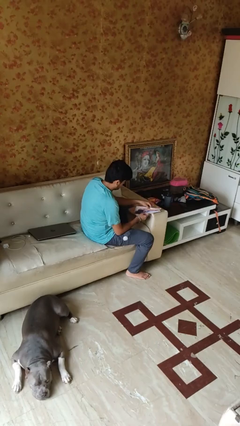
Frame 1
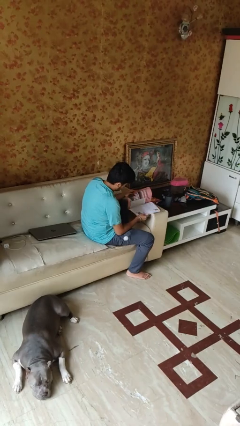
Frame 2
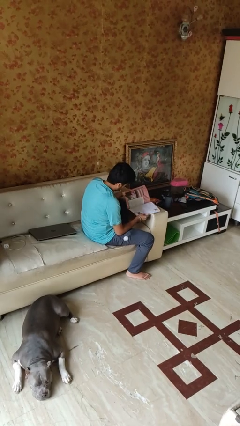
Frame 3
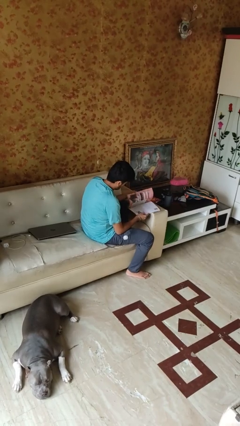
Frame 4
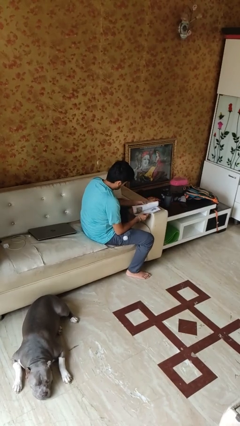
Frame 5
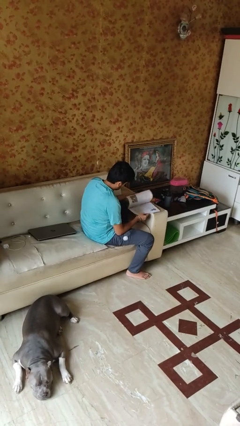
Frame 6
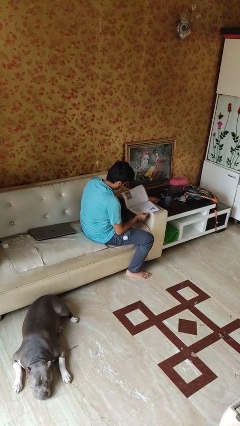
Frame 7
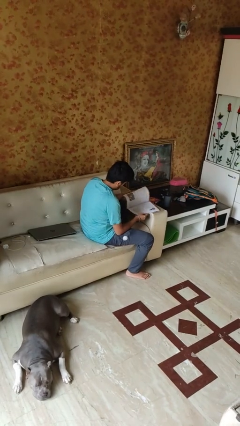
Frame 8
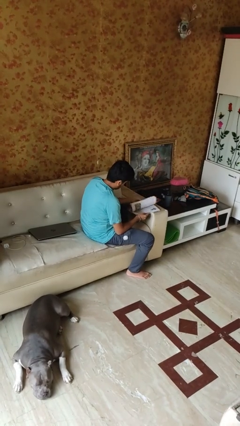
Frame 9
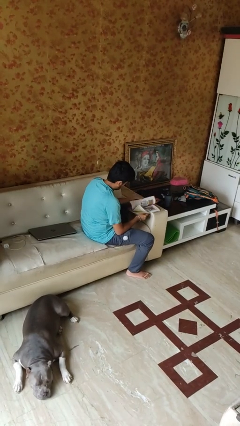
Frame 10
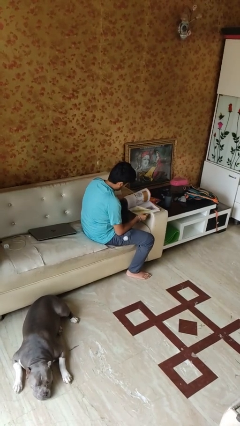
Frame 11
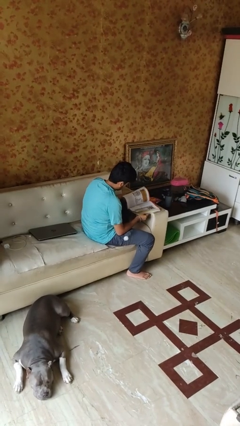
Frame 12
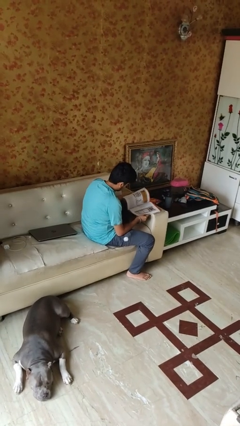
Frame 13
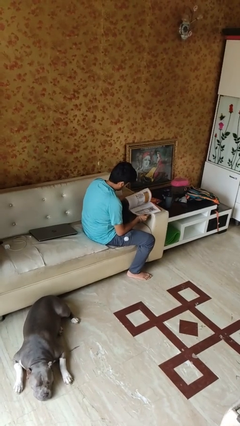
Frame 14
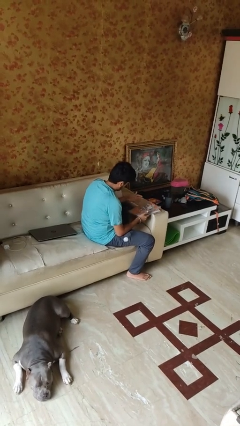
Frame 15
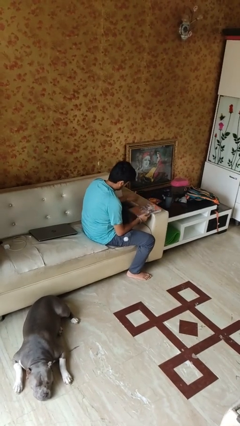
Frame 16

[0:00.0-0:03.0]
person reads magazine

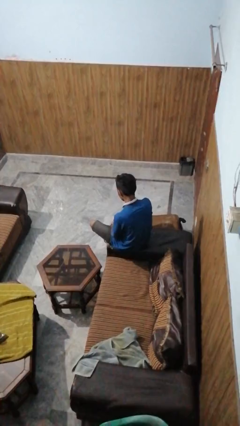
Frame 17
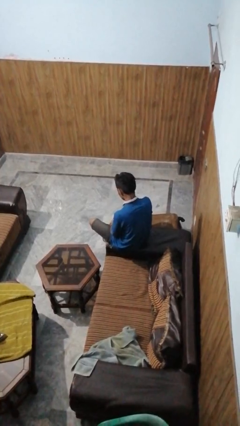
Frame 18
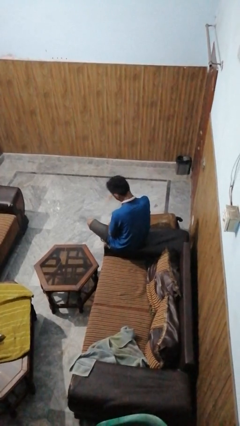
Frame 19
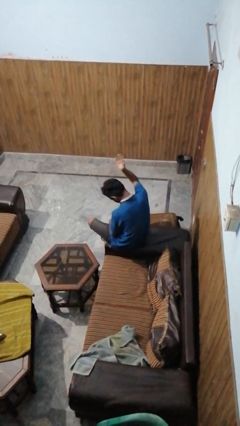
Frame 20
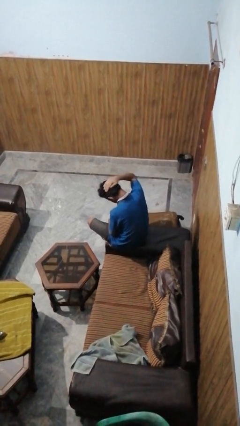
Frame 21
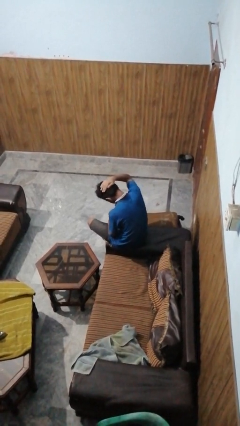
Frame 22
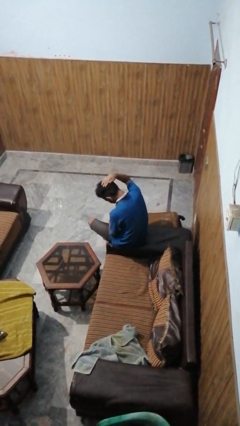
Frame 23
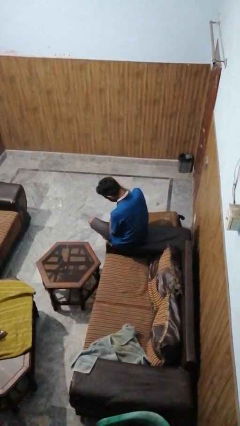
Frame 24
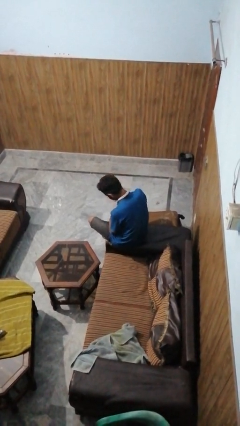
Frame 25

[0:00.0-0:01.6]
person swats bug

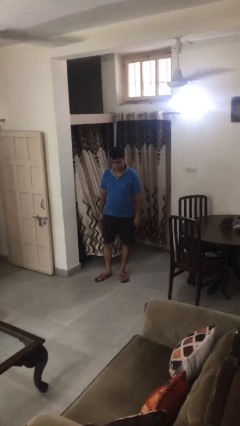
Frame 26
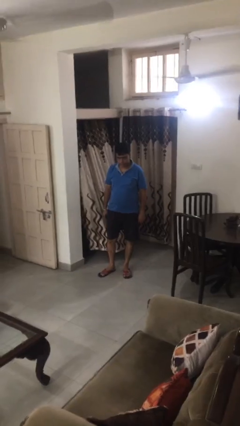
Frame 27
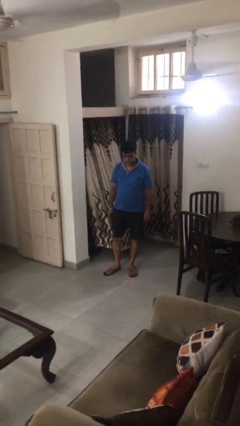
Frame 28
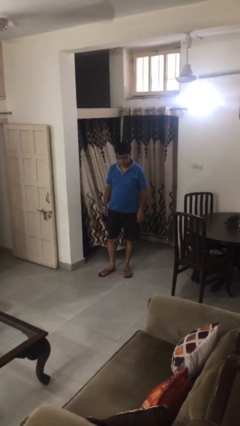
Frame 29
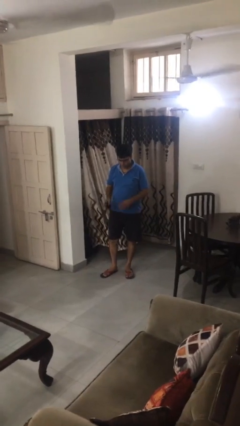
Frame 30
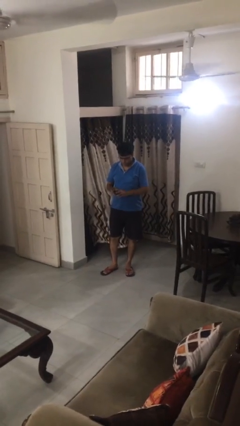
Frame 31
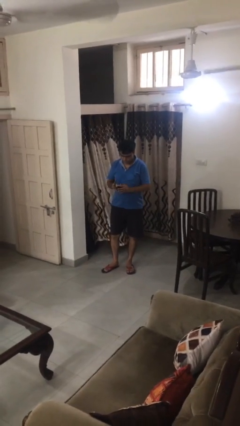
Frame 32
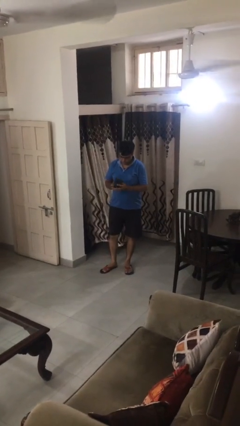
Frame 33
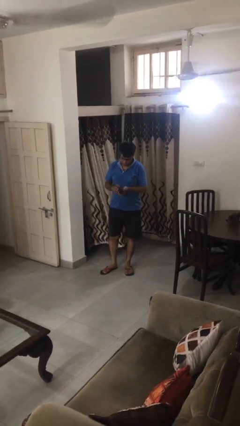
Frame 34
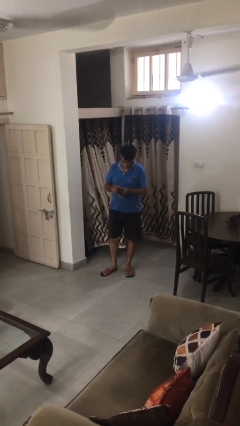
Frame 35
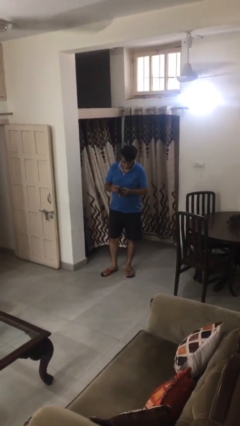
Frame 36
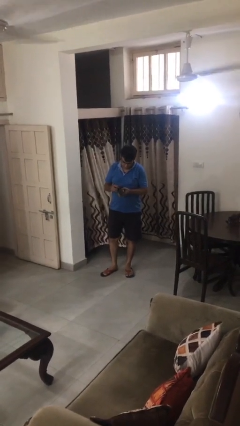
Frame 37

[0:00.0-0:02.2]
person searches in purse

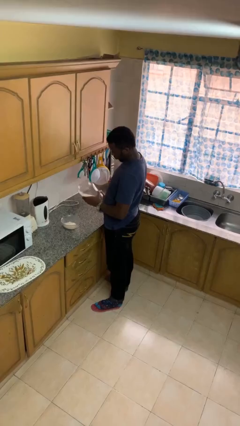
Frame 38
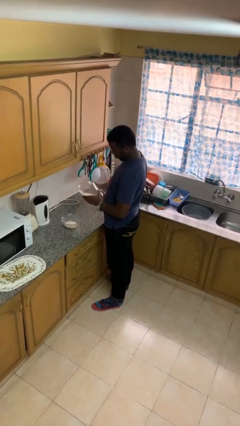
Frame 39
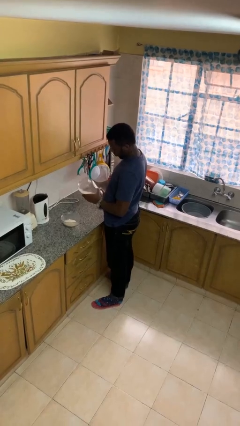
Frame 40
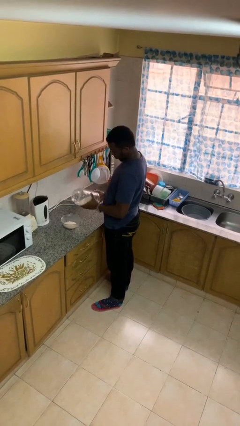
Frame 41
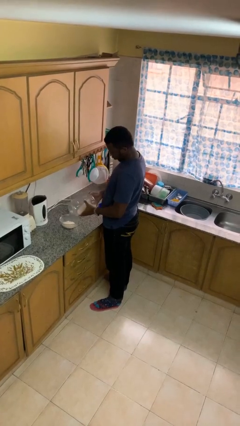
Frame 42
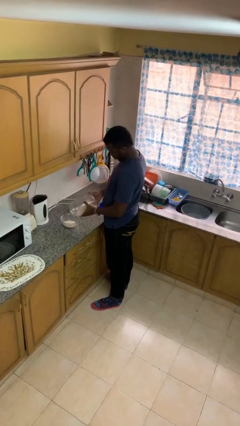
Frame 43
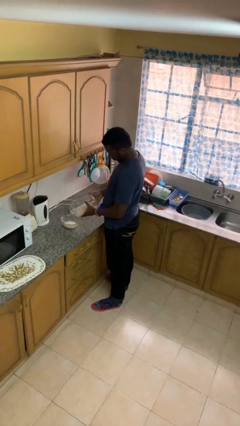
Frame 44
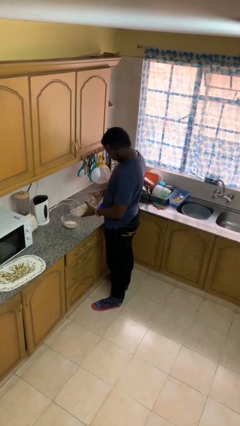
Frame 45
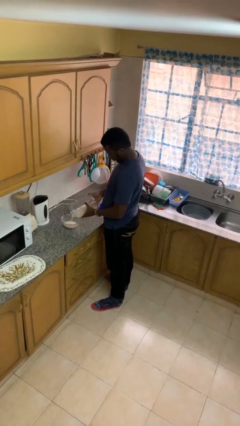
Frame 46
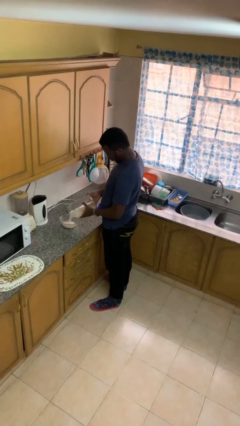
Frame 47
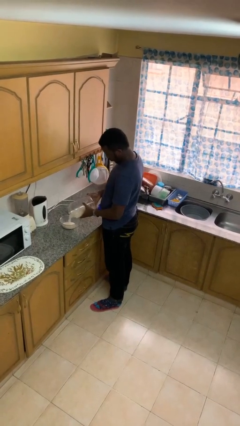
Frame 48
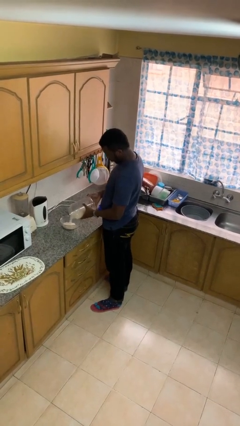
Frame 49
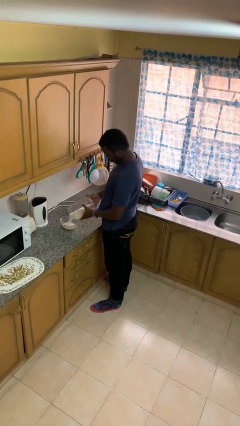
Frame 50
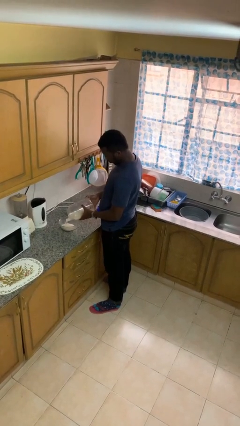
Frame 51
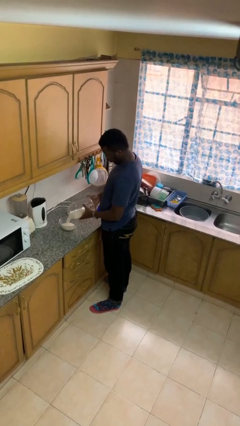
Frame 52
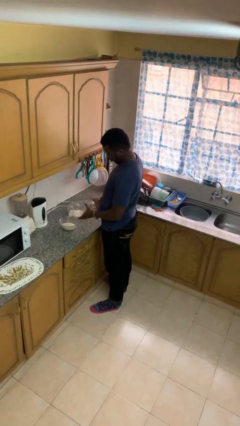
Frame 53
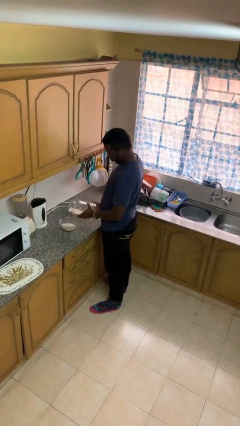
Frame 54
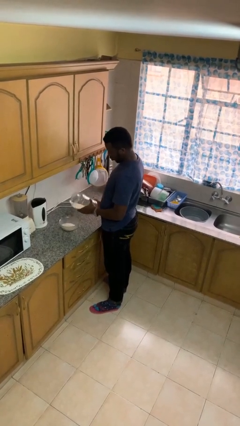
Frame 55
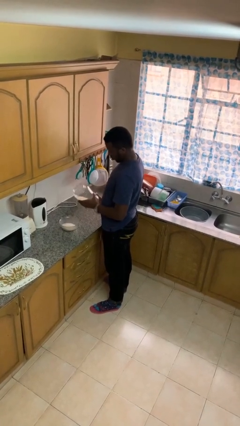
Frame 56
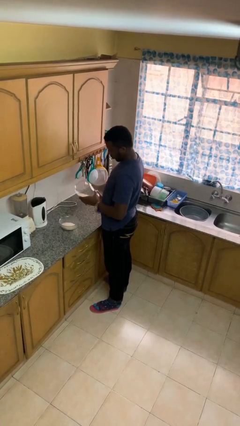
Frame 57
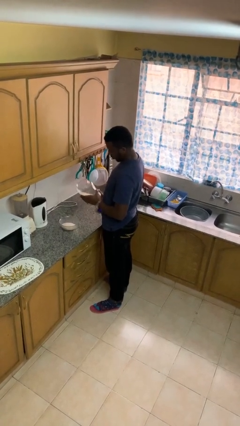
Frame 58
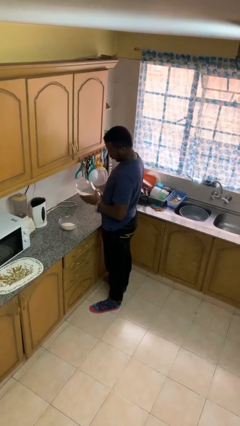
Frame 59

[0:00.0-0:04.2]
person pours into bowl

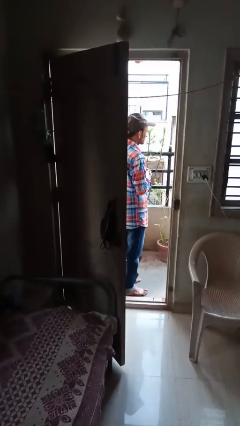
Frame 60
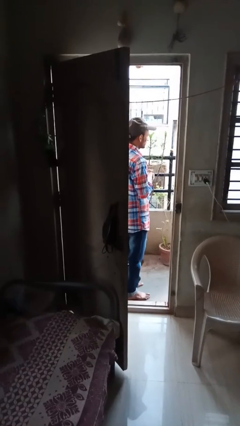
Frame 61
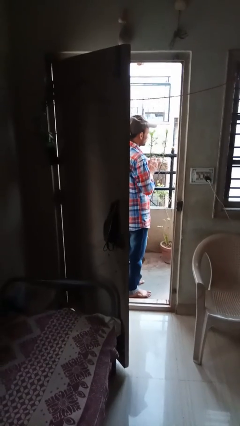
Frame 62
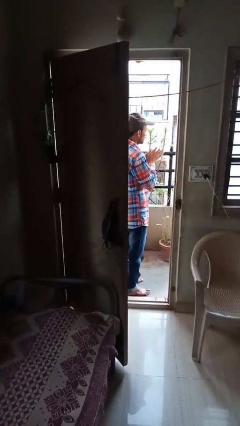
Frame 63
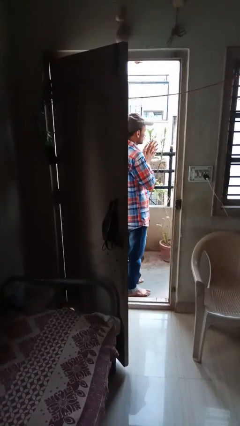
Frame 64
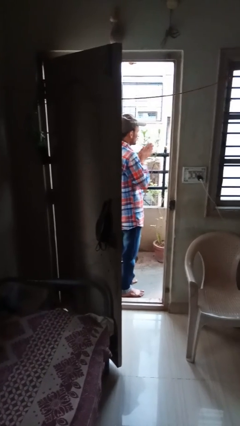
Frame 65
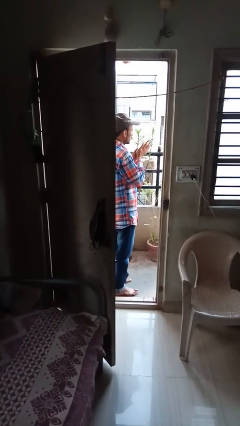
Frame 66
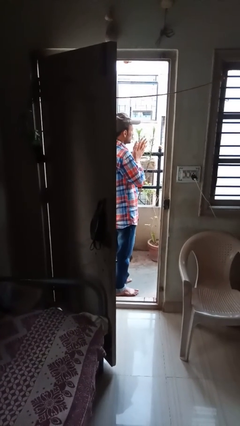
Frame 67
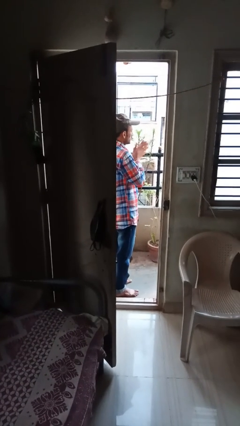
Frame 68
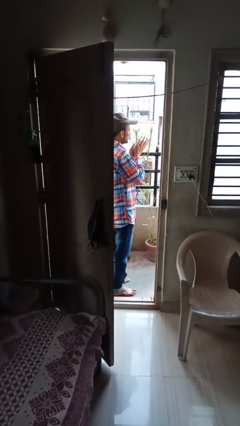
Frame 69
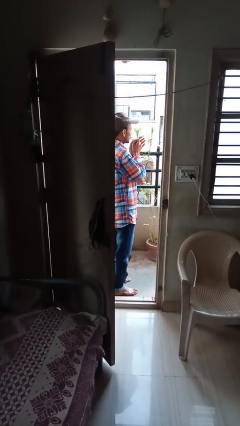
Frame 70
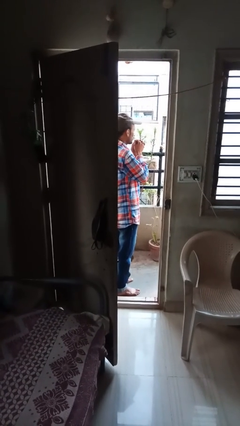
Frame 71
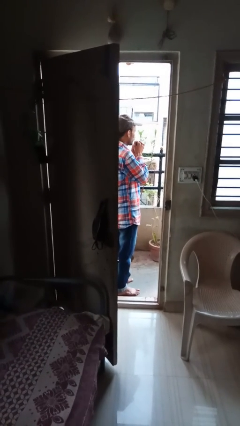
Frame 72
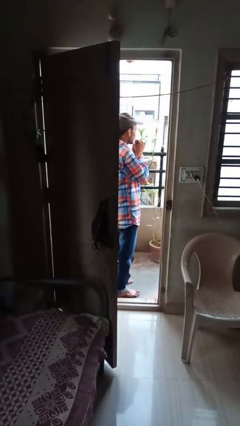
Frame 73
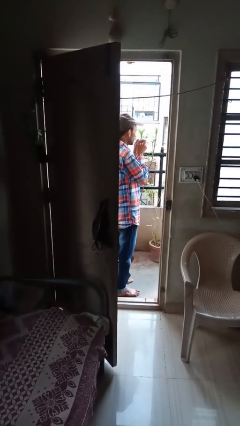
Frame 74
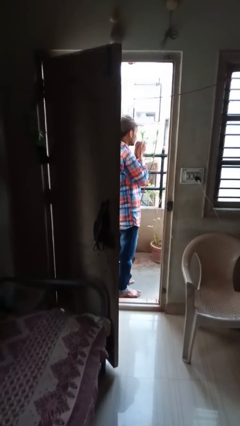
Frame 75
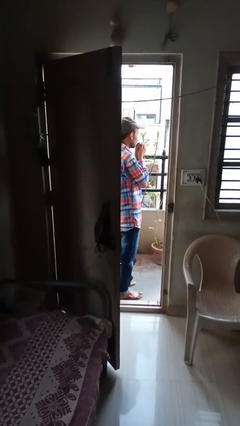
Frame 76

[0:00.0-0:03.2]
person blows into hands

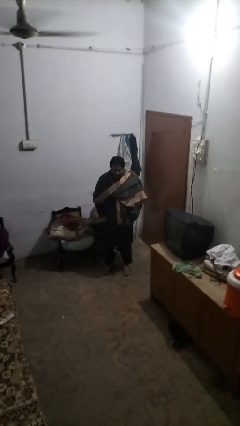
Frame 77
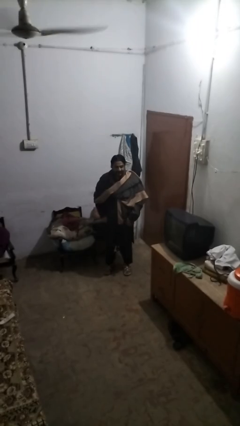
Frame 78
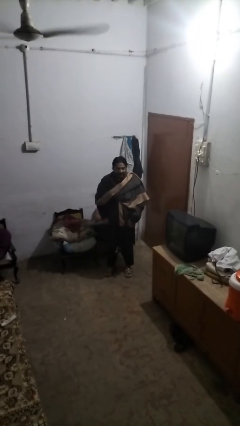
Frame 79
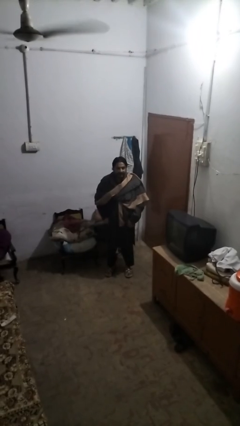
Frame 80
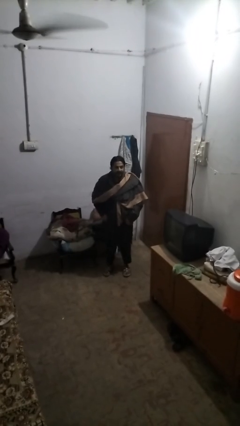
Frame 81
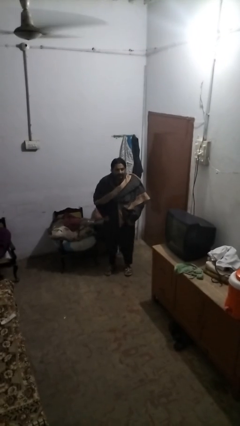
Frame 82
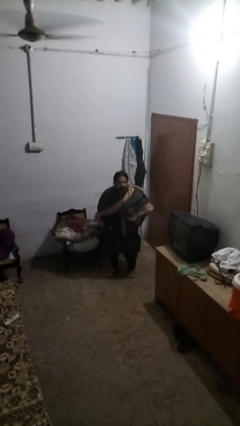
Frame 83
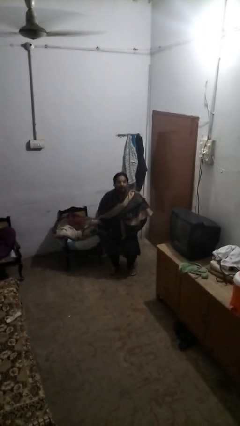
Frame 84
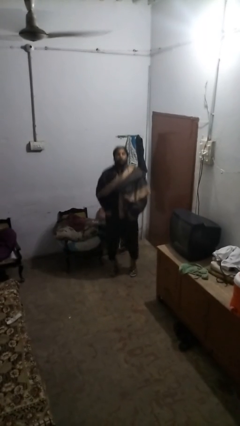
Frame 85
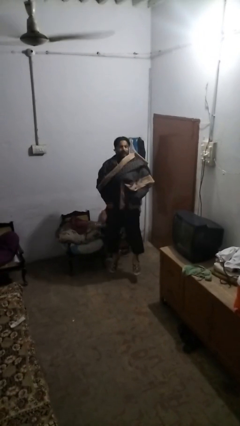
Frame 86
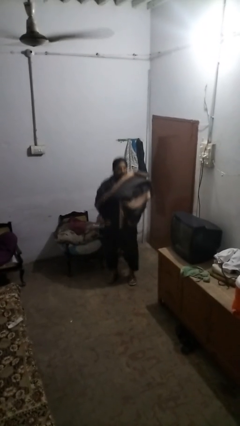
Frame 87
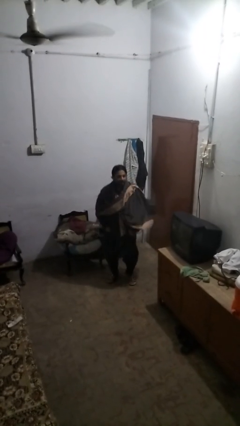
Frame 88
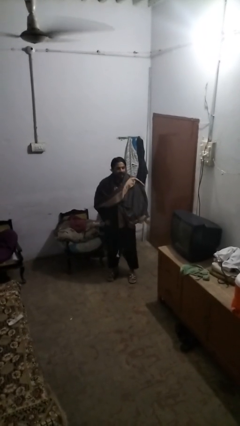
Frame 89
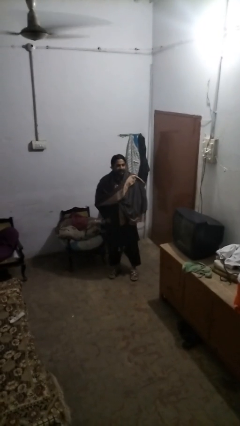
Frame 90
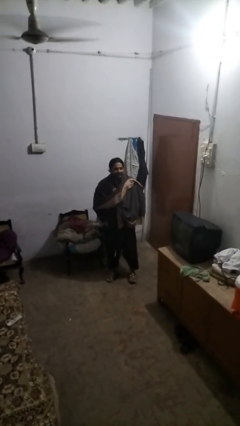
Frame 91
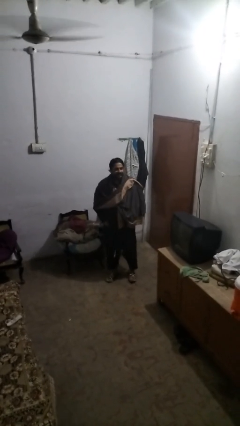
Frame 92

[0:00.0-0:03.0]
person jumps

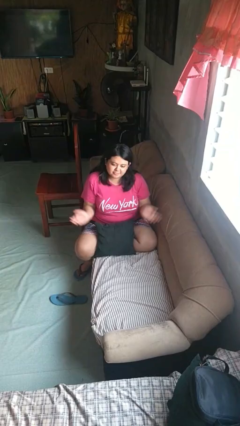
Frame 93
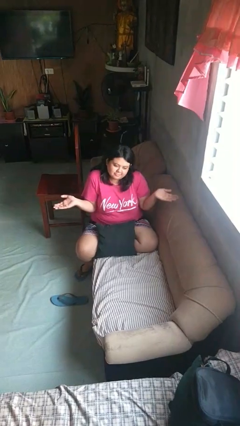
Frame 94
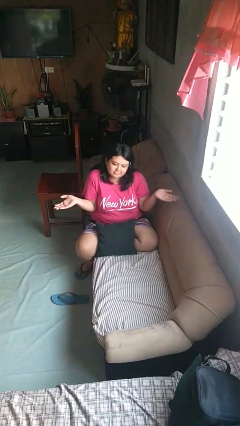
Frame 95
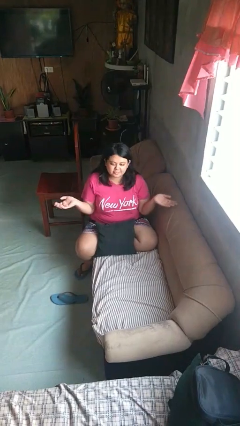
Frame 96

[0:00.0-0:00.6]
person shrugs
